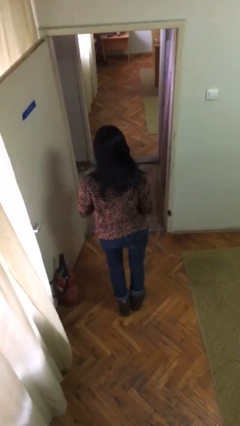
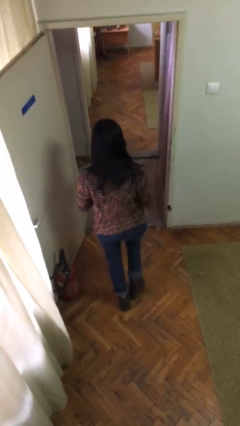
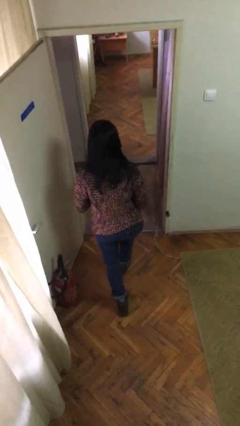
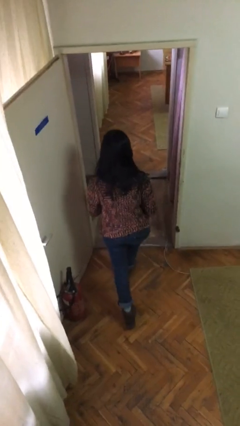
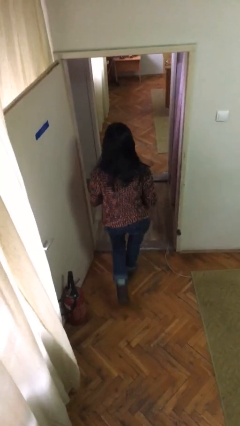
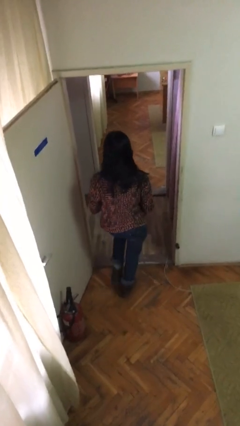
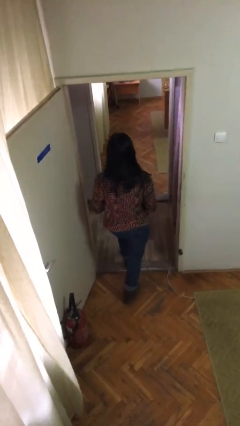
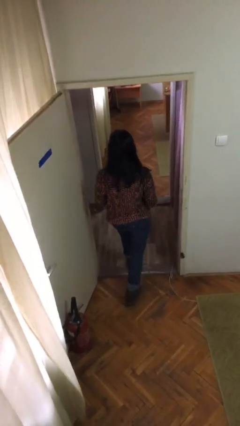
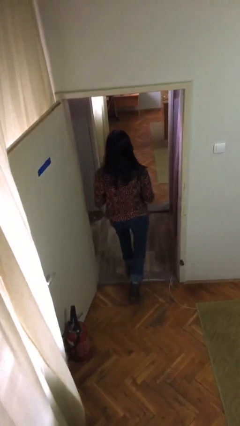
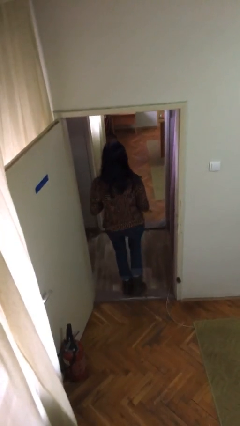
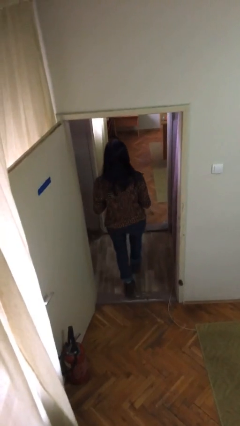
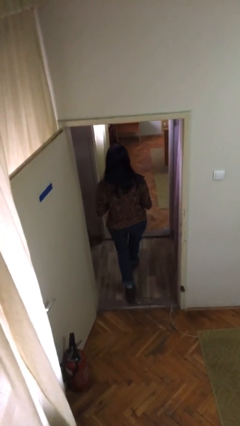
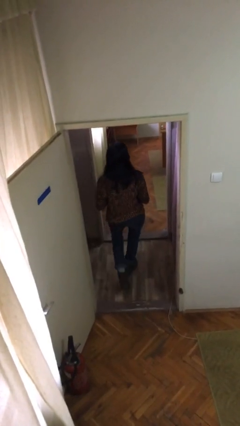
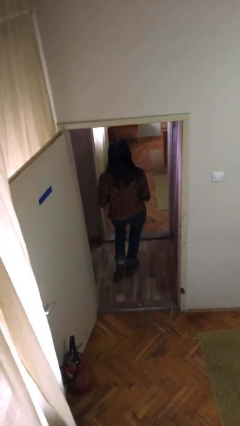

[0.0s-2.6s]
person exits scene through structure

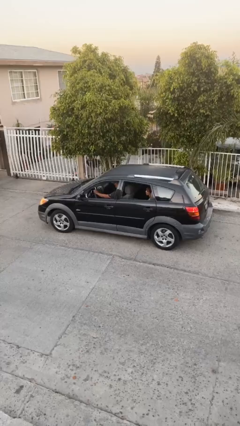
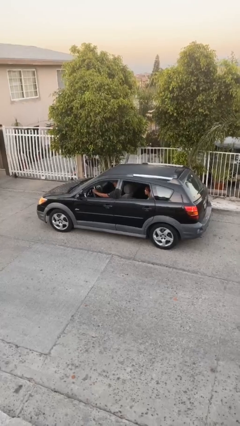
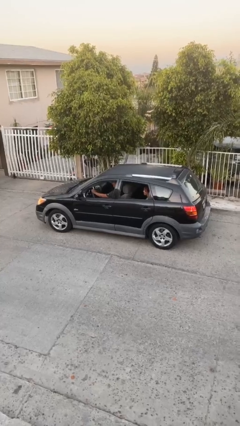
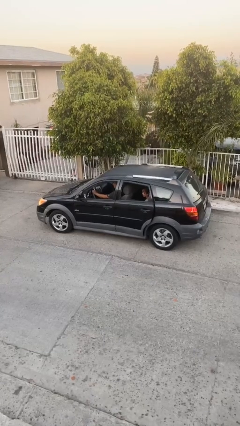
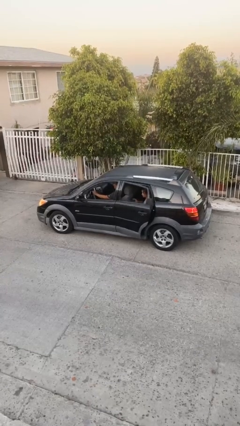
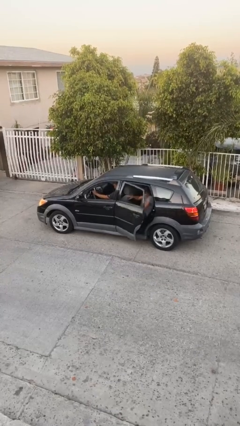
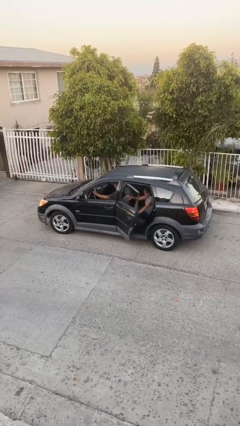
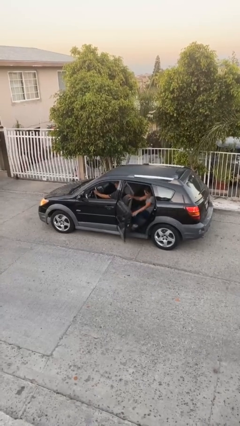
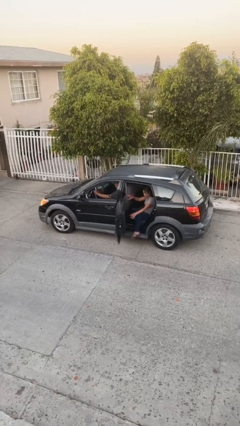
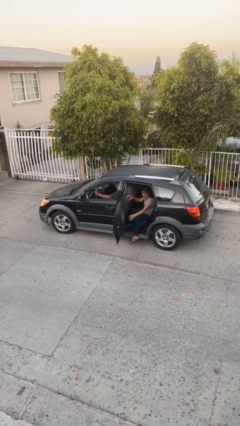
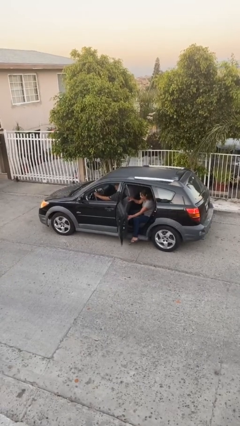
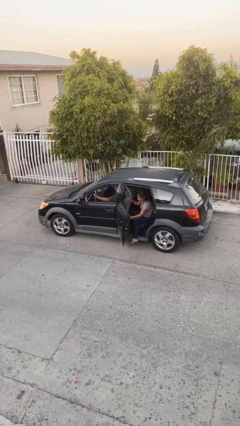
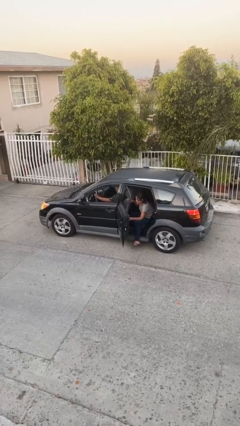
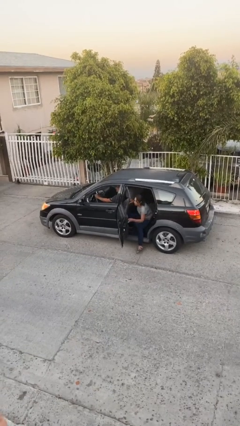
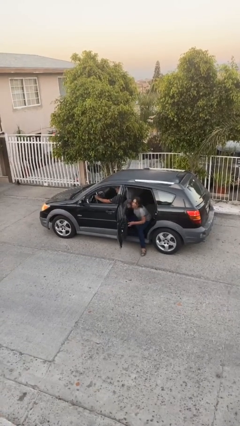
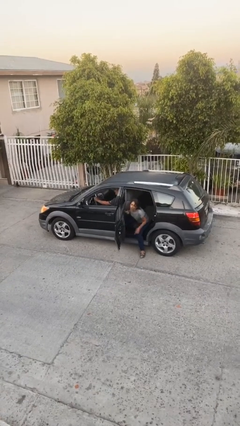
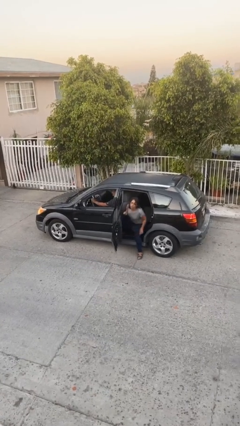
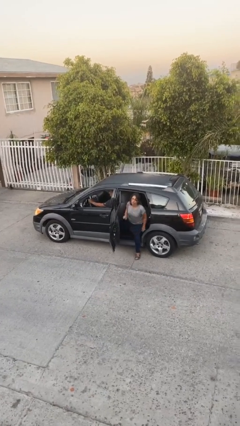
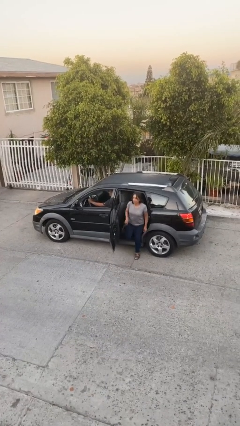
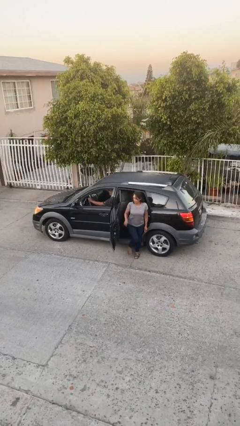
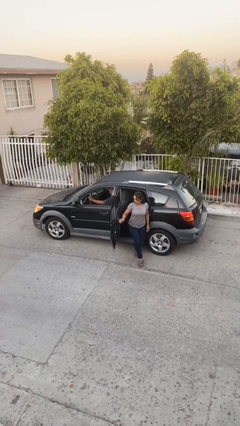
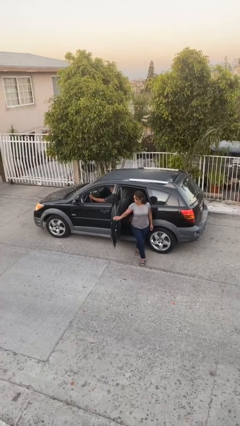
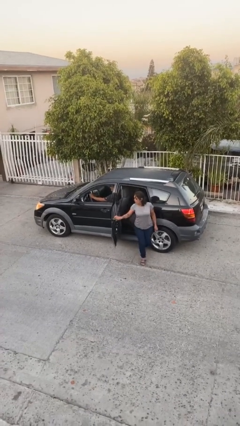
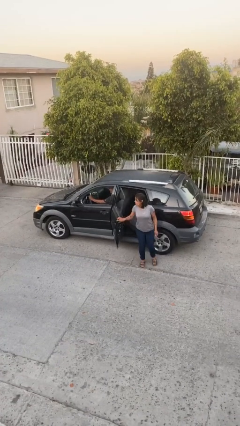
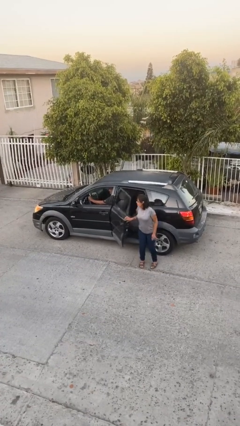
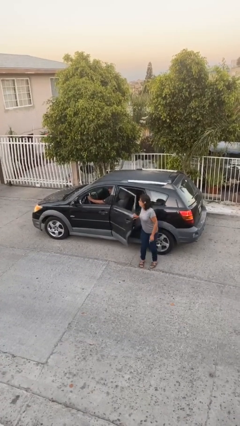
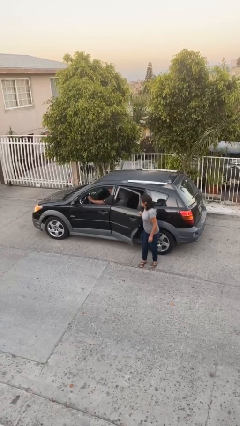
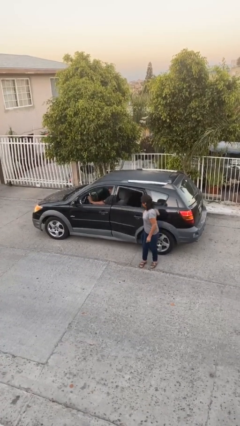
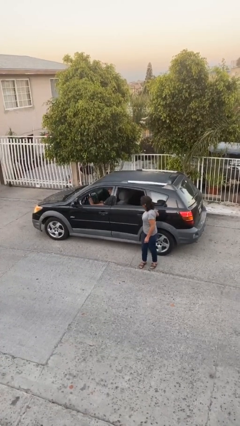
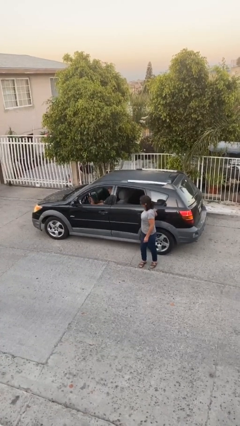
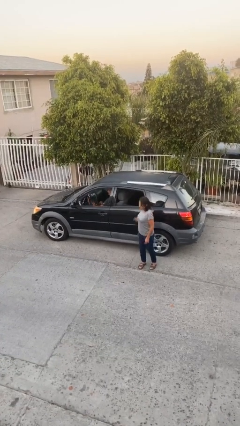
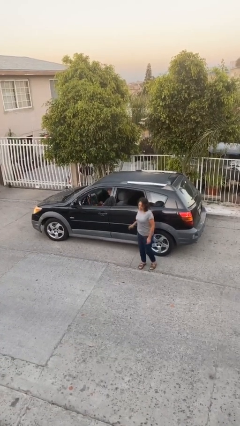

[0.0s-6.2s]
car drops off person

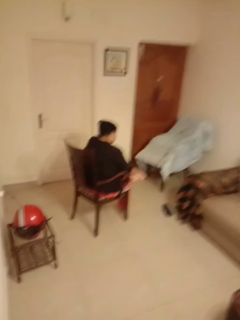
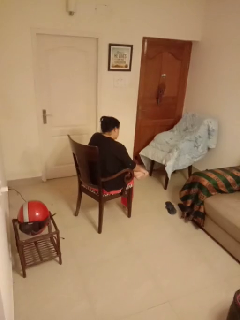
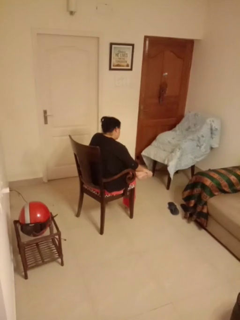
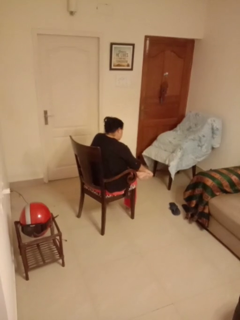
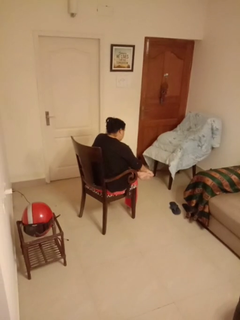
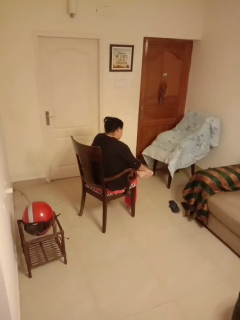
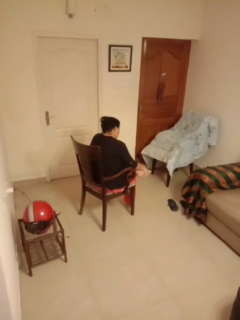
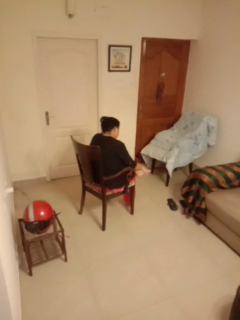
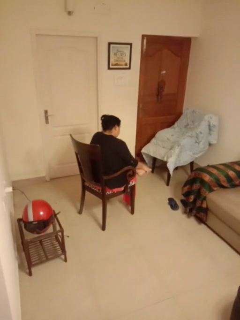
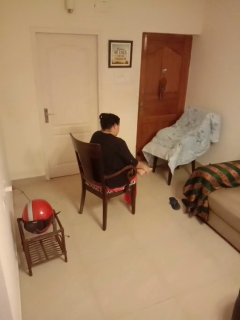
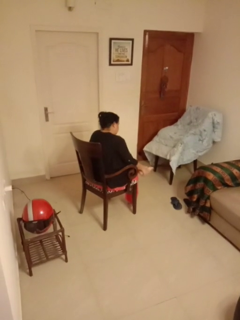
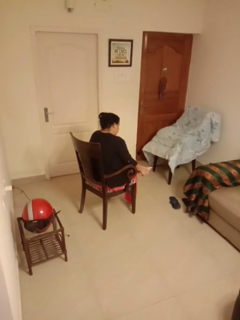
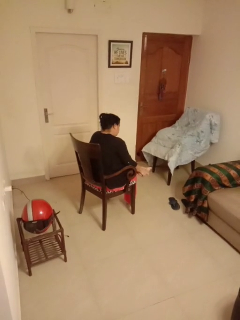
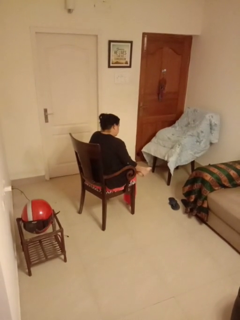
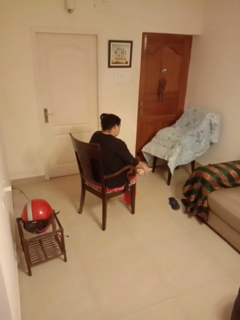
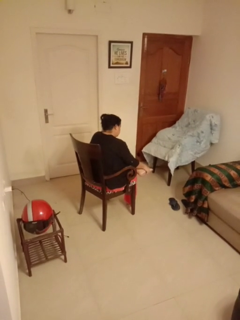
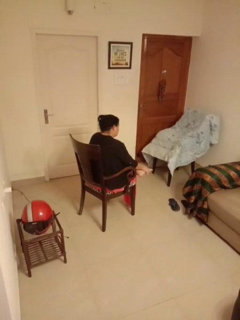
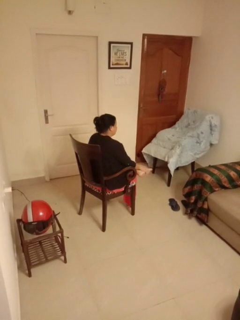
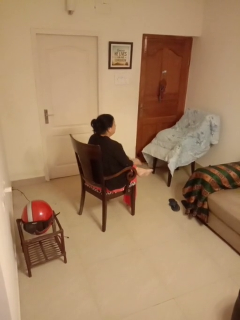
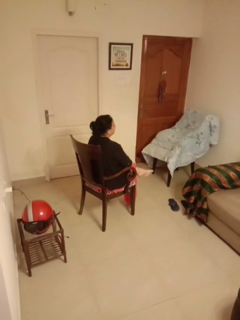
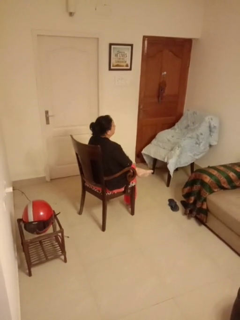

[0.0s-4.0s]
person rubs foot

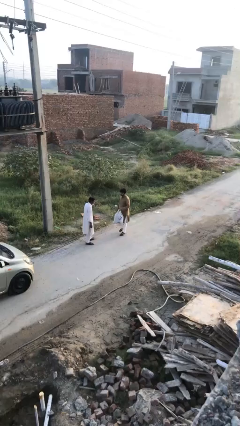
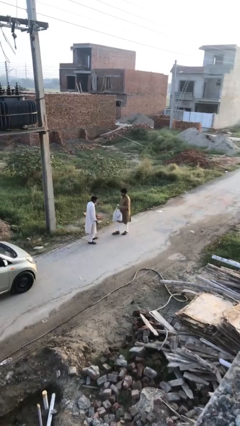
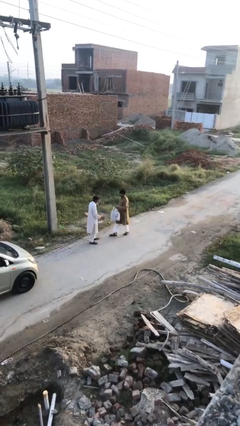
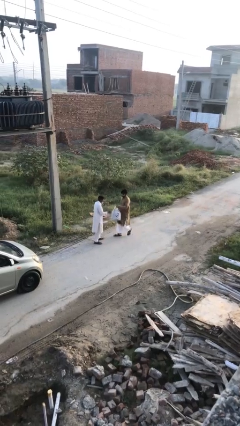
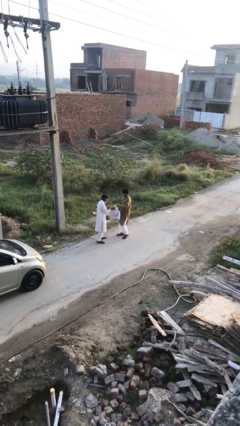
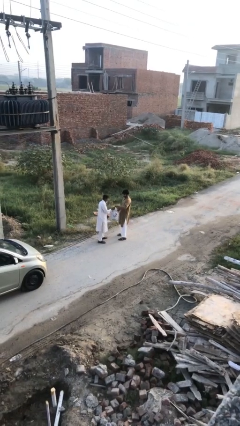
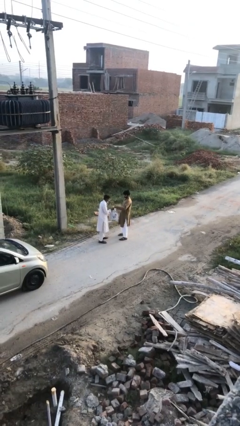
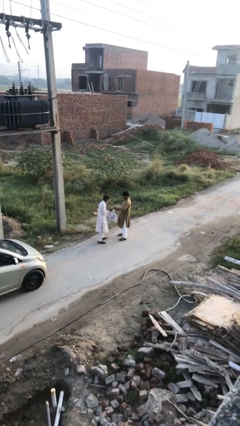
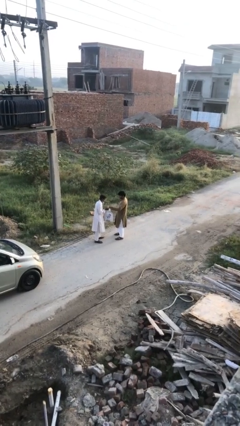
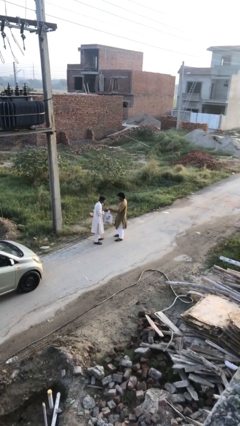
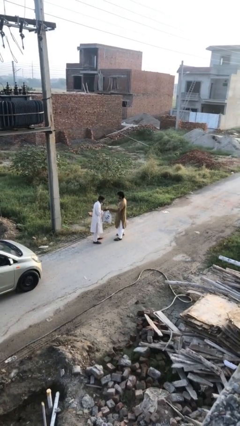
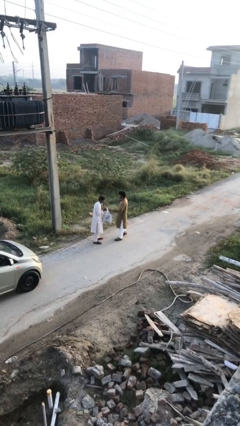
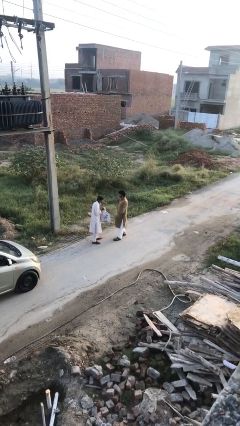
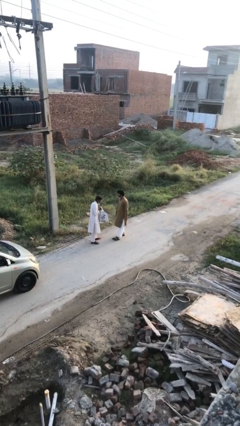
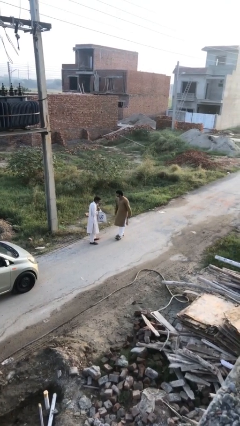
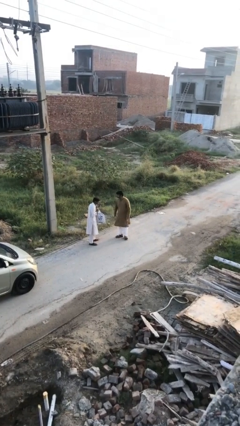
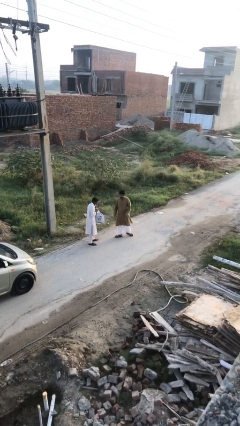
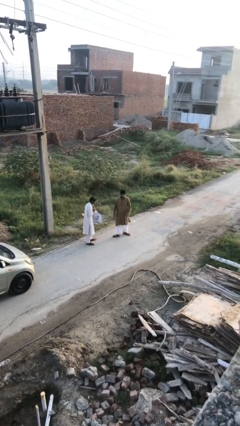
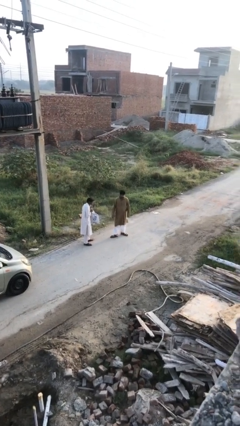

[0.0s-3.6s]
person transfers object to person

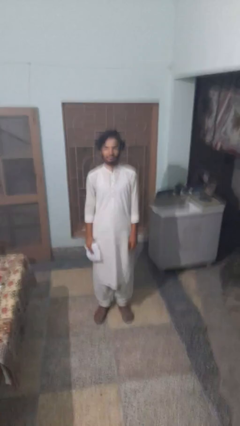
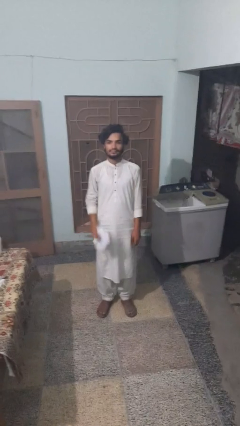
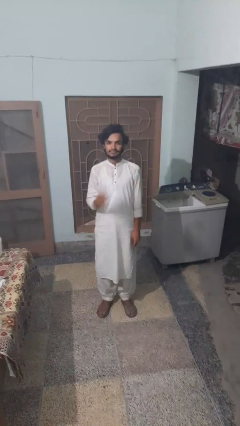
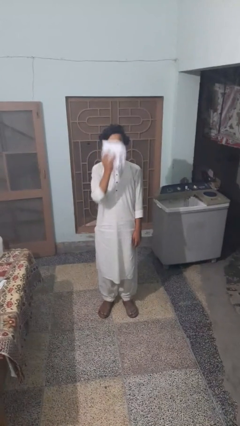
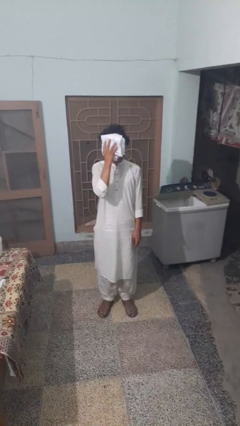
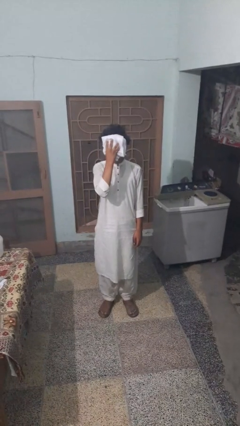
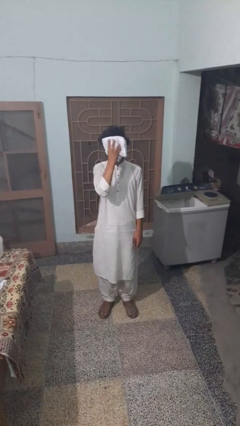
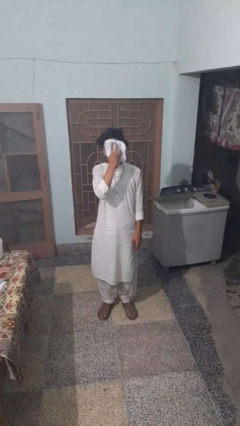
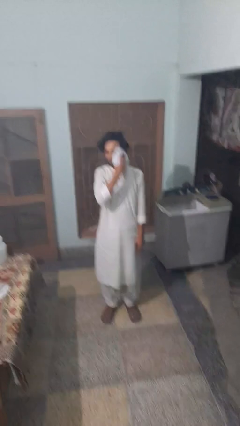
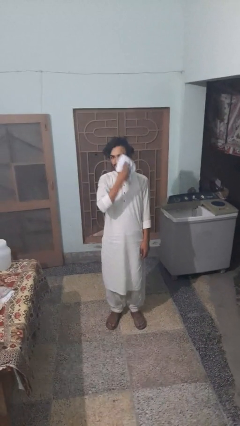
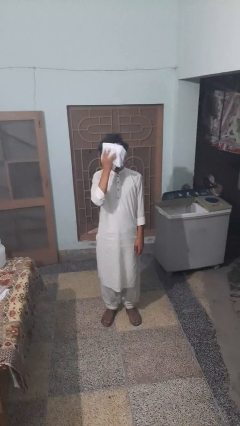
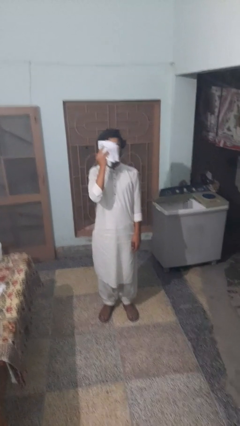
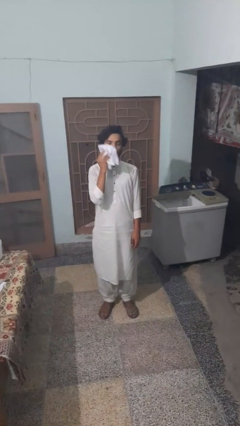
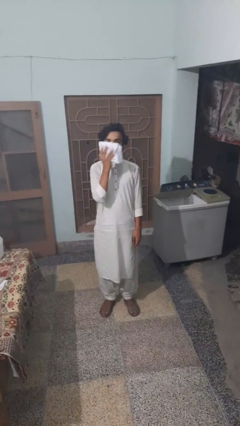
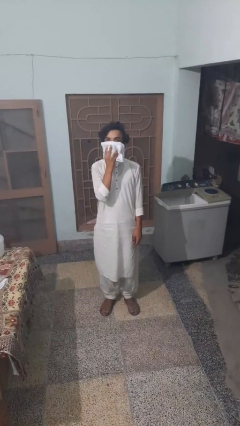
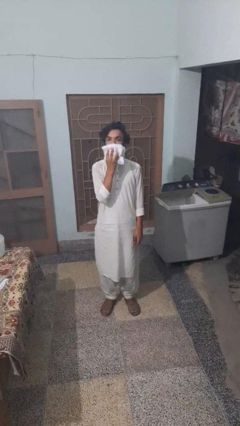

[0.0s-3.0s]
person wipes mouth with napkin
